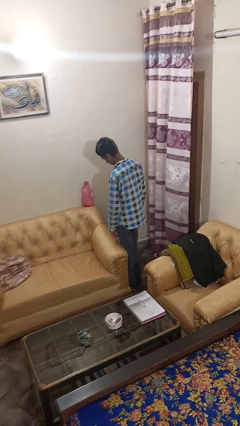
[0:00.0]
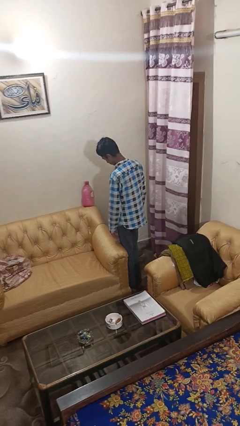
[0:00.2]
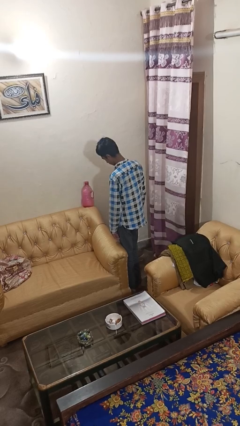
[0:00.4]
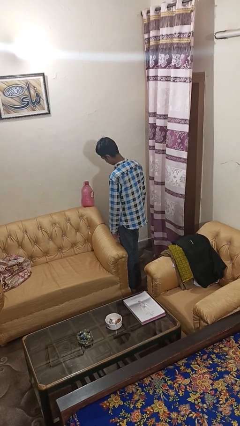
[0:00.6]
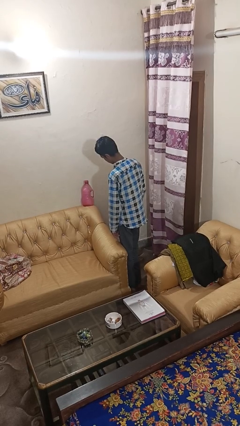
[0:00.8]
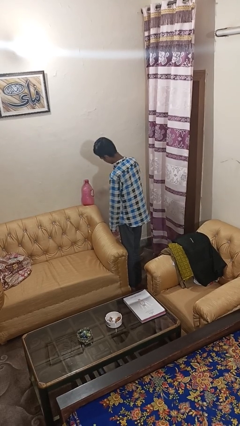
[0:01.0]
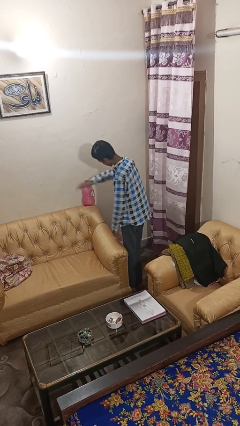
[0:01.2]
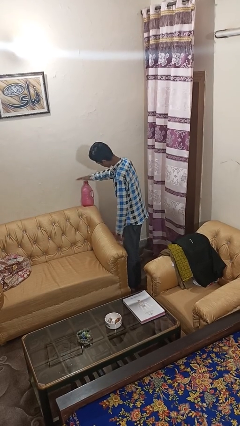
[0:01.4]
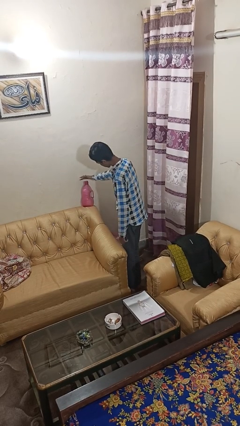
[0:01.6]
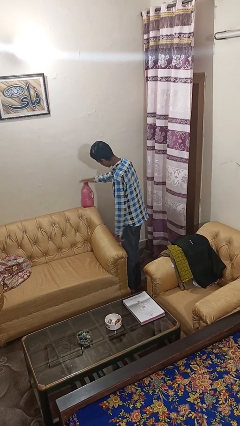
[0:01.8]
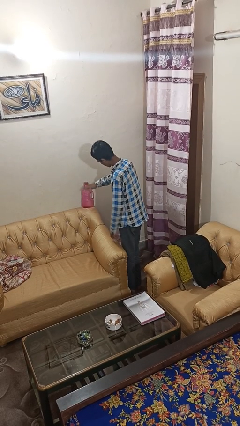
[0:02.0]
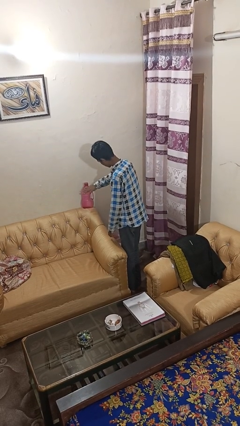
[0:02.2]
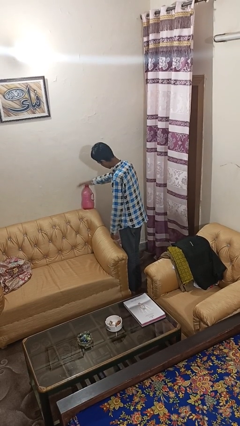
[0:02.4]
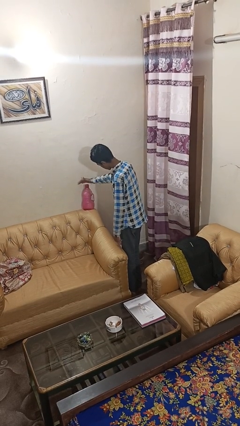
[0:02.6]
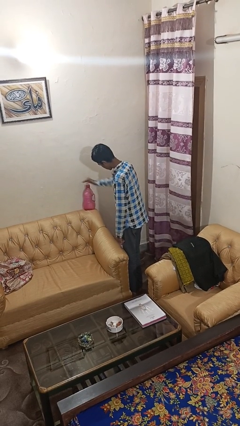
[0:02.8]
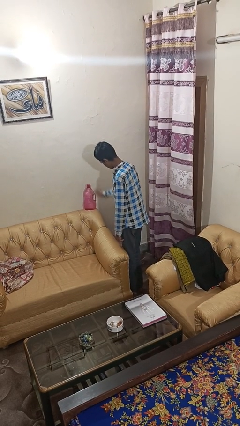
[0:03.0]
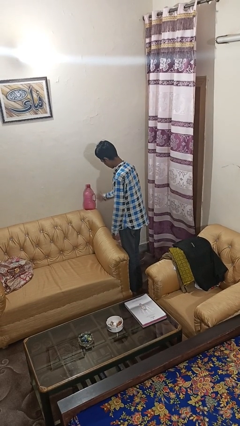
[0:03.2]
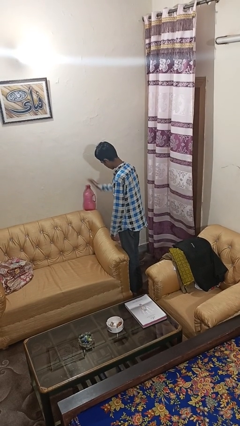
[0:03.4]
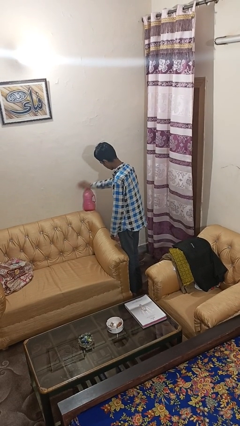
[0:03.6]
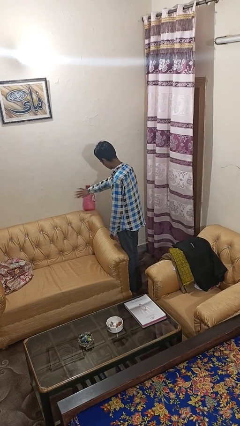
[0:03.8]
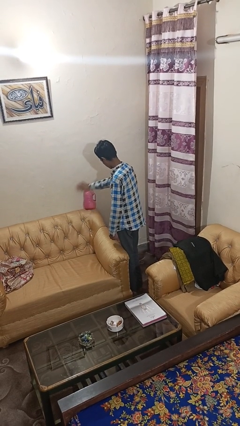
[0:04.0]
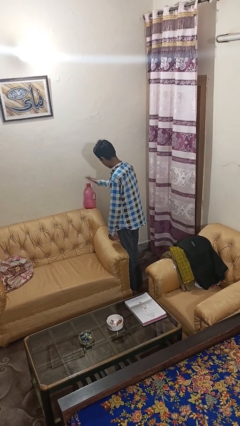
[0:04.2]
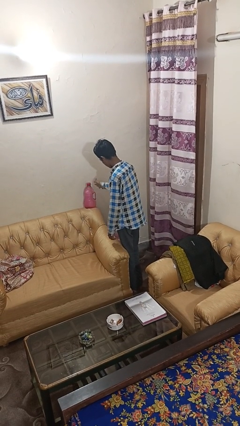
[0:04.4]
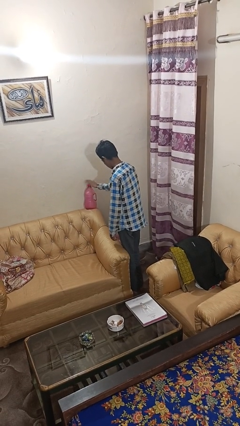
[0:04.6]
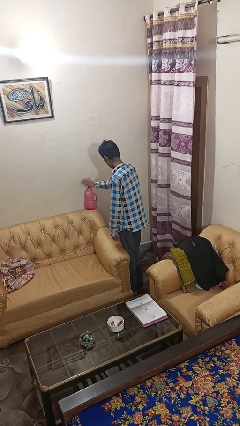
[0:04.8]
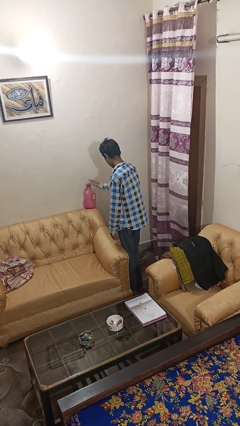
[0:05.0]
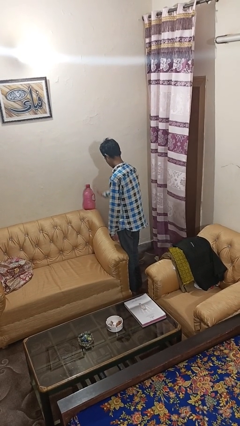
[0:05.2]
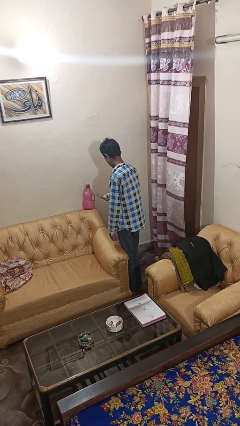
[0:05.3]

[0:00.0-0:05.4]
person waves hand over object

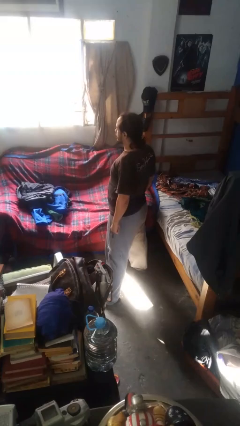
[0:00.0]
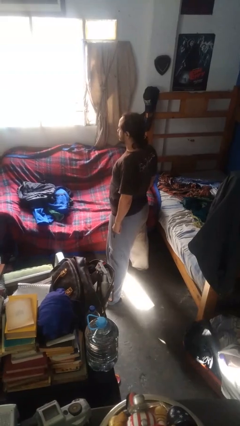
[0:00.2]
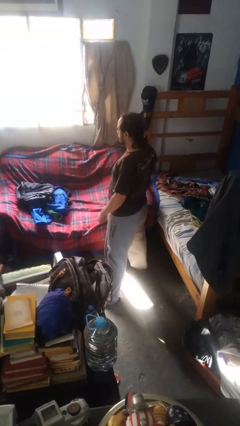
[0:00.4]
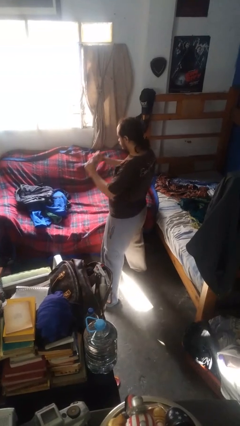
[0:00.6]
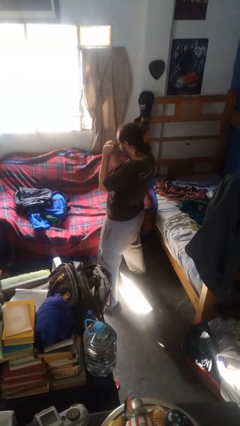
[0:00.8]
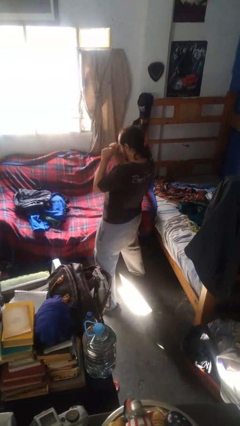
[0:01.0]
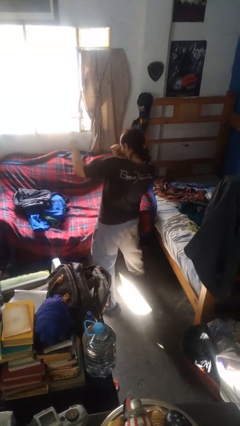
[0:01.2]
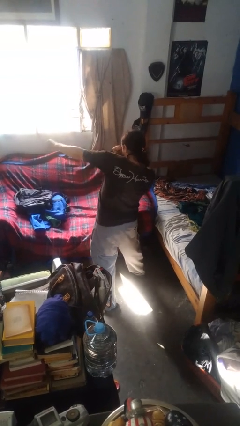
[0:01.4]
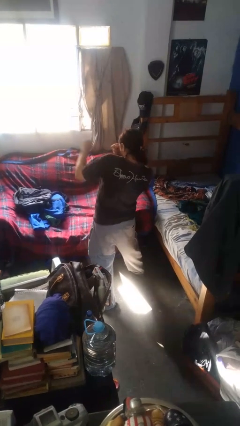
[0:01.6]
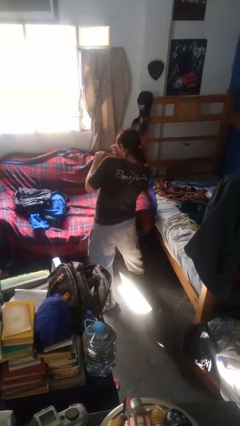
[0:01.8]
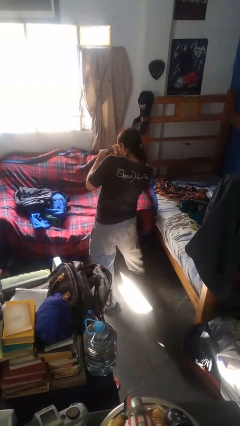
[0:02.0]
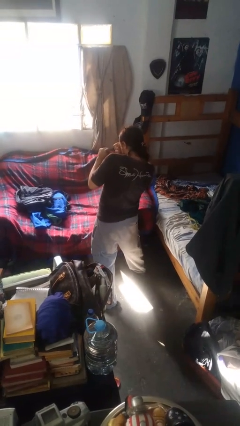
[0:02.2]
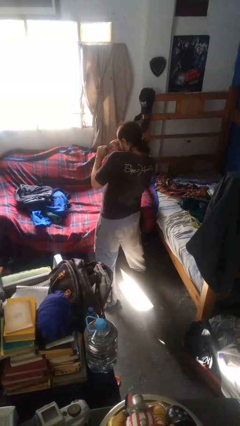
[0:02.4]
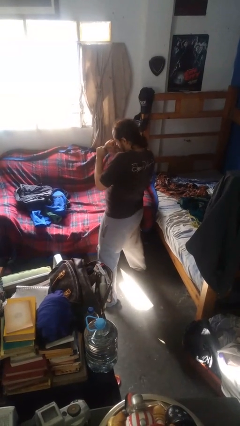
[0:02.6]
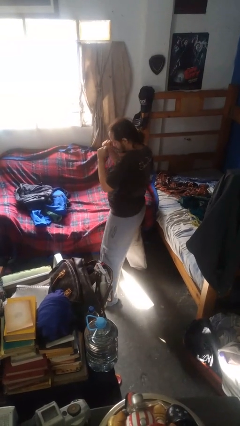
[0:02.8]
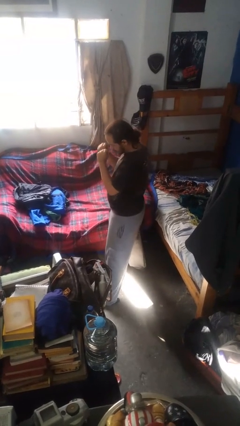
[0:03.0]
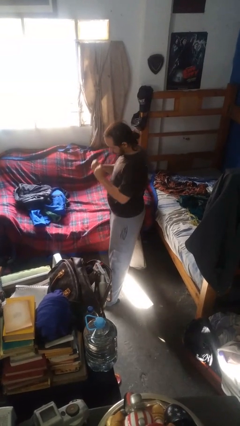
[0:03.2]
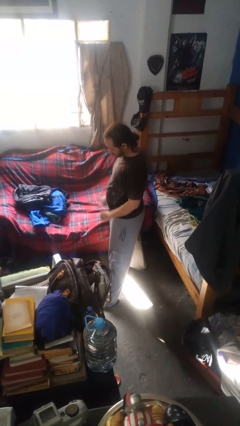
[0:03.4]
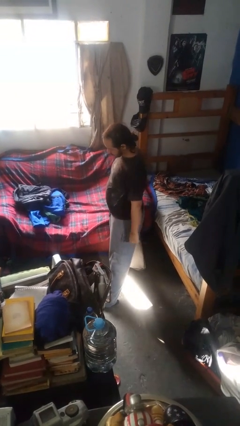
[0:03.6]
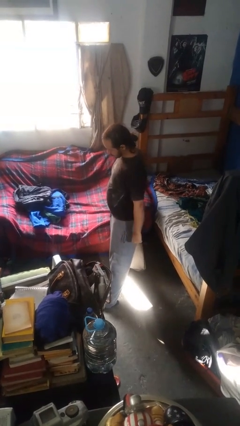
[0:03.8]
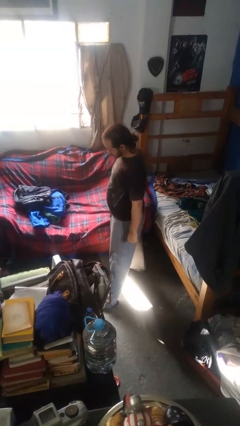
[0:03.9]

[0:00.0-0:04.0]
person punches

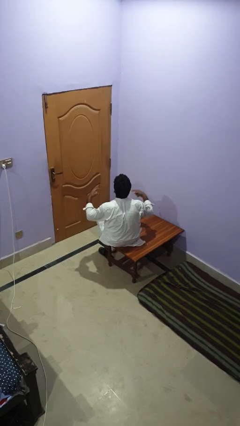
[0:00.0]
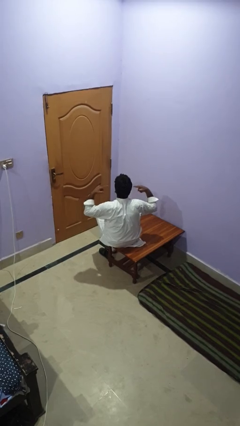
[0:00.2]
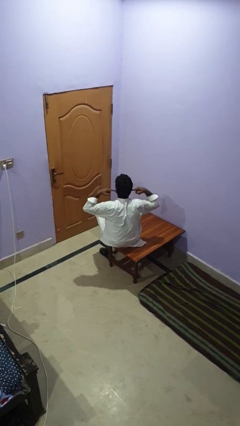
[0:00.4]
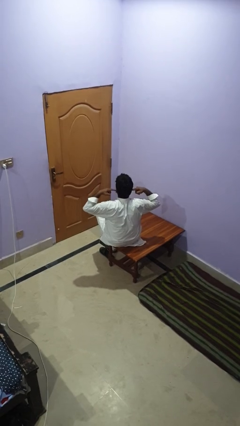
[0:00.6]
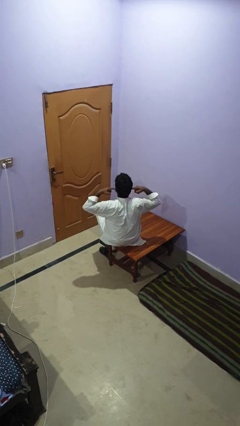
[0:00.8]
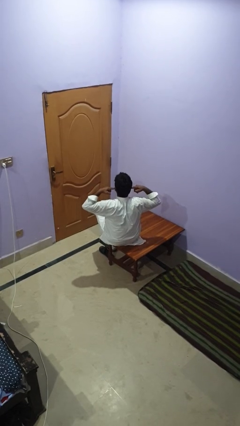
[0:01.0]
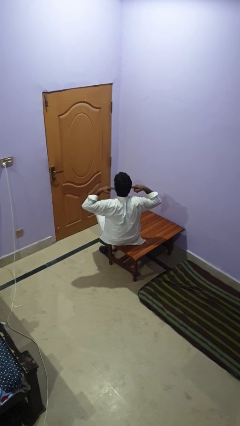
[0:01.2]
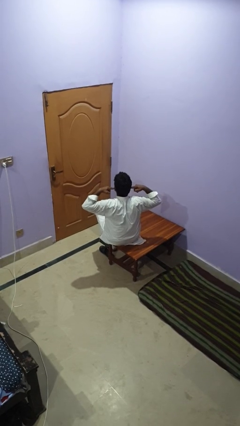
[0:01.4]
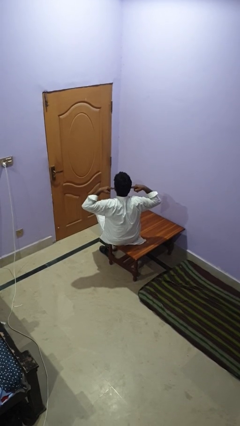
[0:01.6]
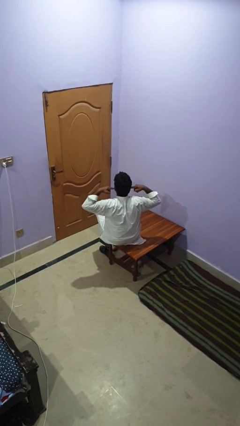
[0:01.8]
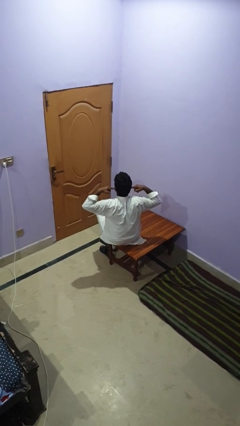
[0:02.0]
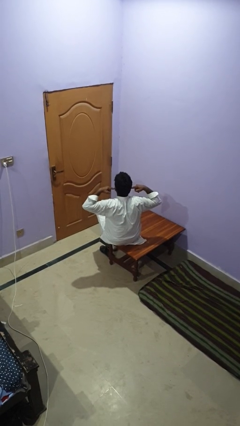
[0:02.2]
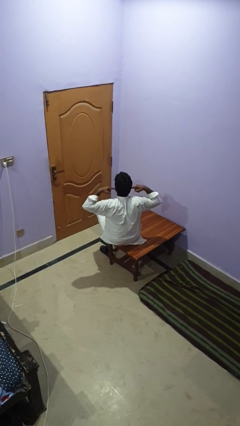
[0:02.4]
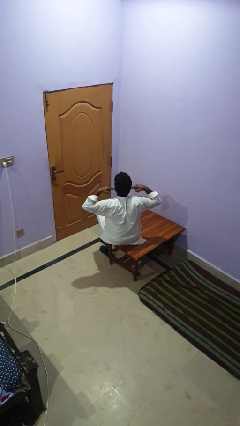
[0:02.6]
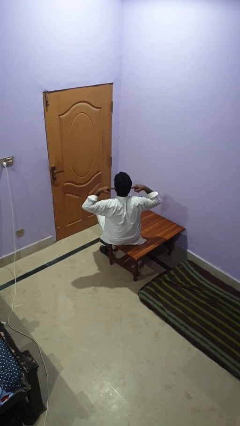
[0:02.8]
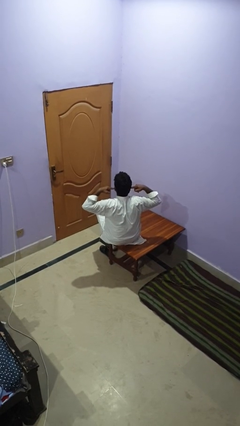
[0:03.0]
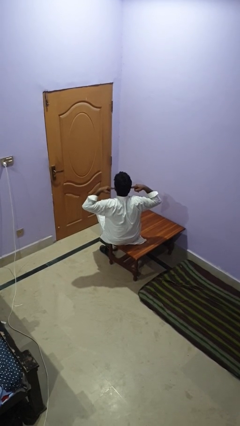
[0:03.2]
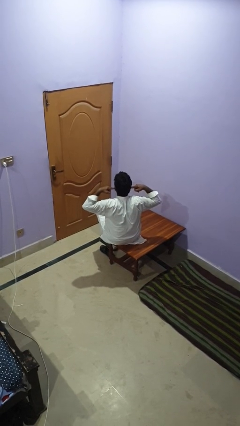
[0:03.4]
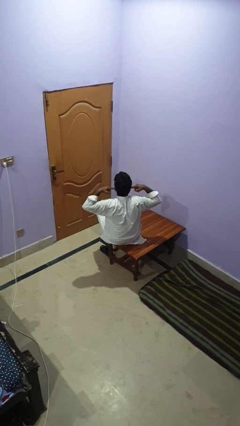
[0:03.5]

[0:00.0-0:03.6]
person puts fingers in ear

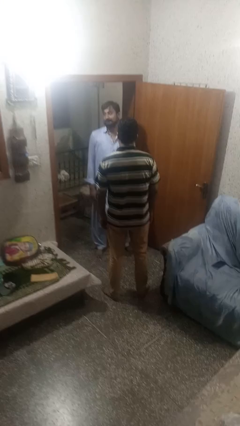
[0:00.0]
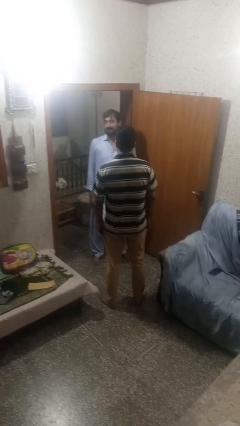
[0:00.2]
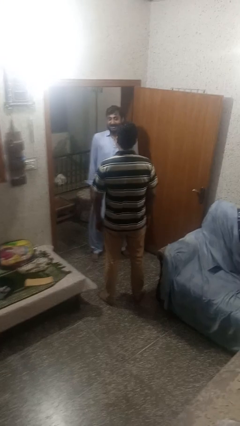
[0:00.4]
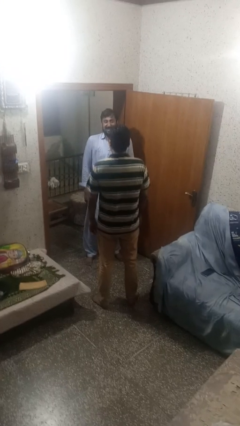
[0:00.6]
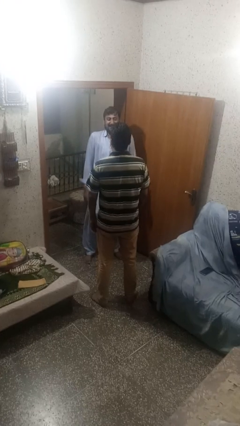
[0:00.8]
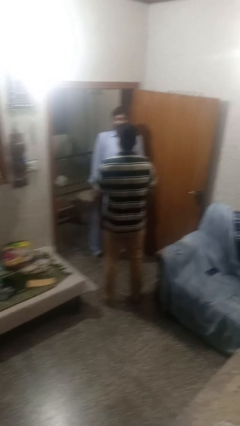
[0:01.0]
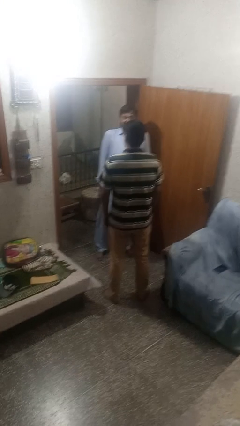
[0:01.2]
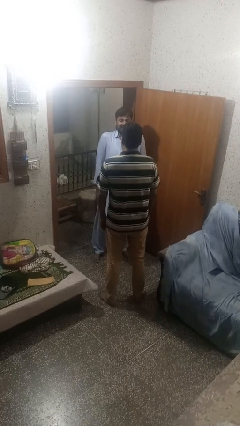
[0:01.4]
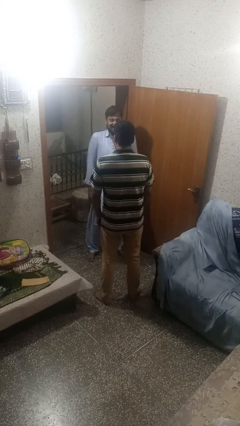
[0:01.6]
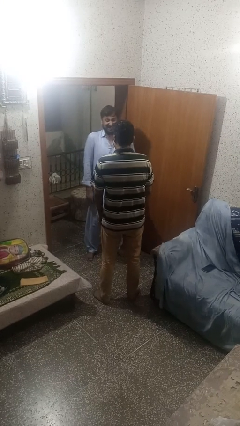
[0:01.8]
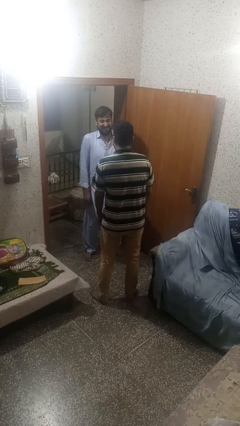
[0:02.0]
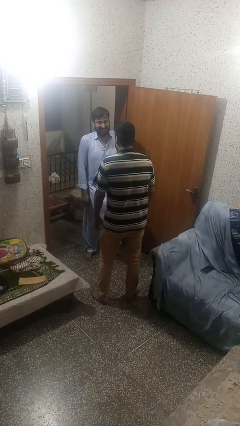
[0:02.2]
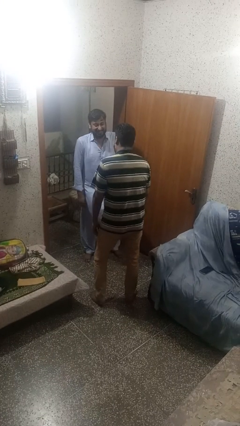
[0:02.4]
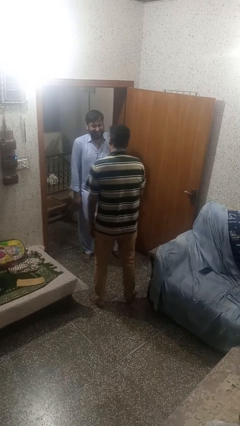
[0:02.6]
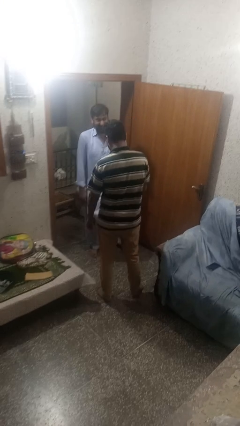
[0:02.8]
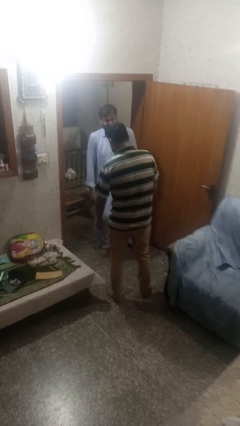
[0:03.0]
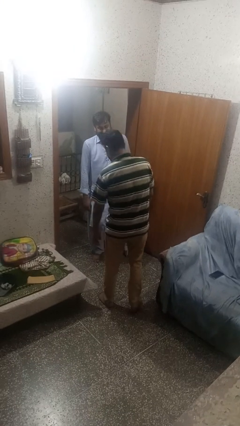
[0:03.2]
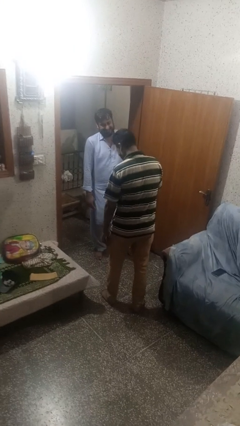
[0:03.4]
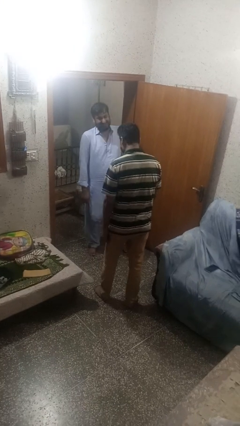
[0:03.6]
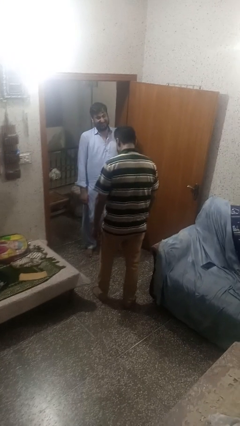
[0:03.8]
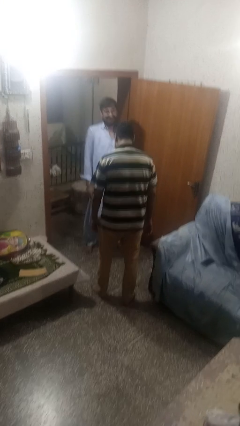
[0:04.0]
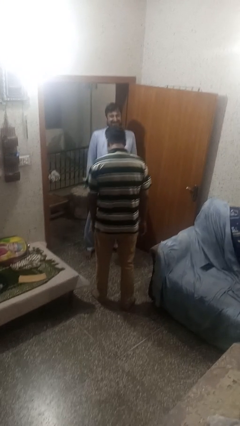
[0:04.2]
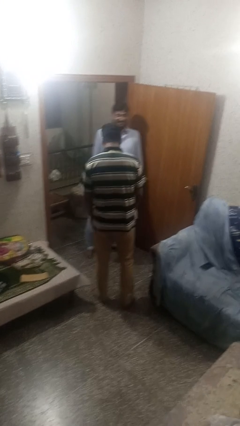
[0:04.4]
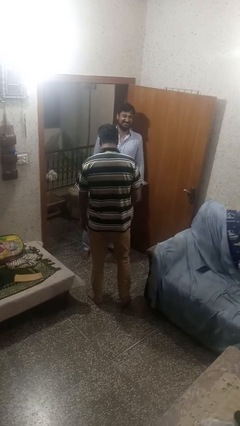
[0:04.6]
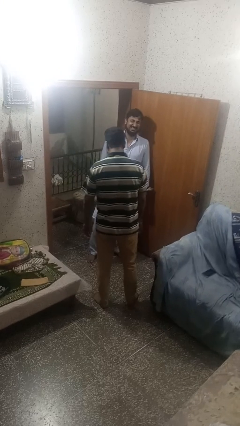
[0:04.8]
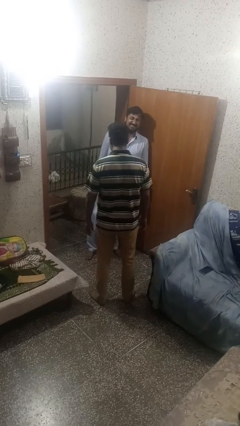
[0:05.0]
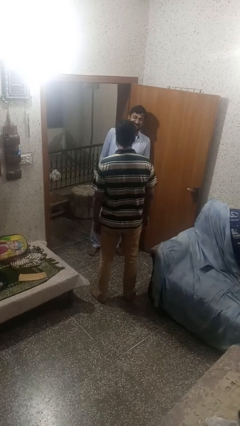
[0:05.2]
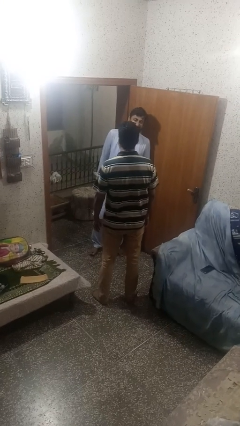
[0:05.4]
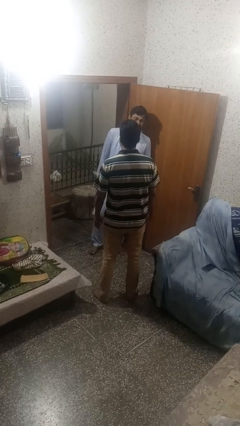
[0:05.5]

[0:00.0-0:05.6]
person laughs with person
